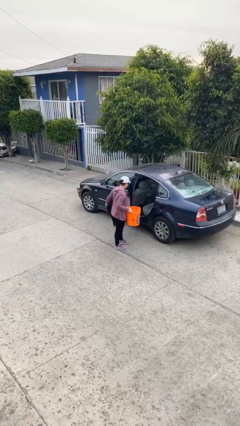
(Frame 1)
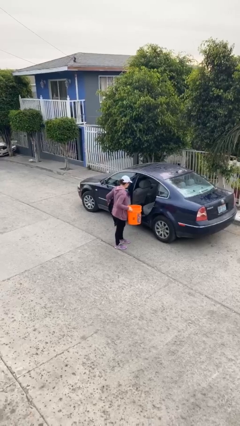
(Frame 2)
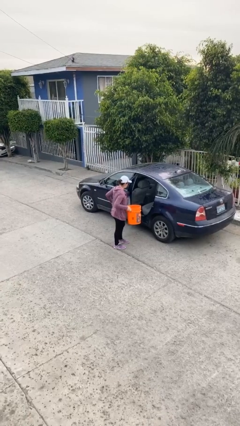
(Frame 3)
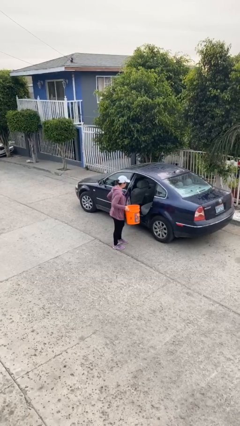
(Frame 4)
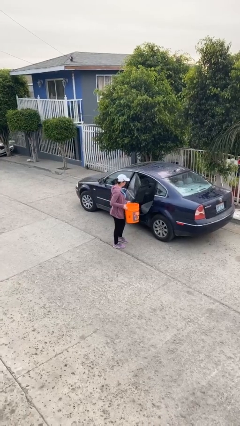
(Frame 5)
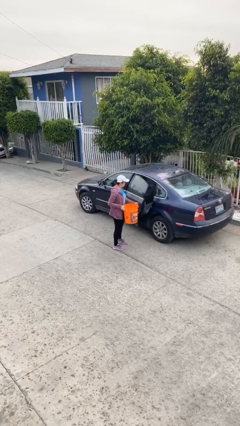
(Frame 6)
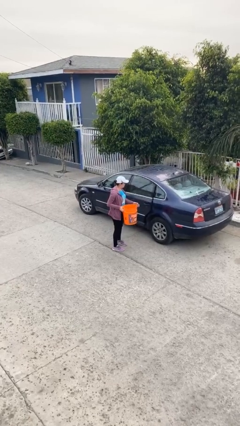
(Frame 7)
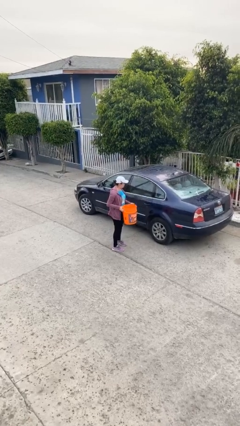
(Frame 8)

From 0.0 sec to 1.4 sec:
person closes car door

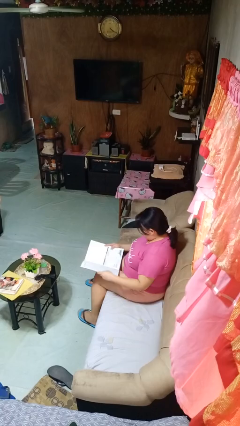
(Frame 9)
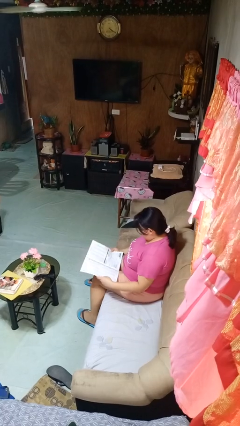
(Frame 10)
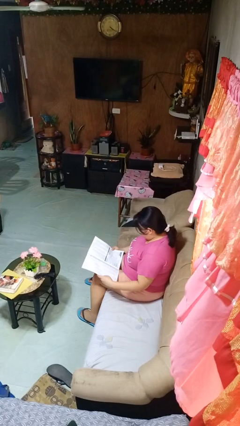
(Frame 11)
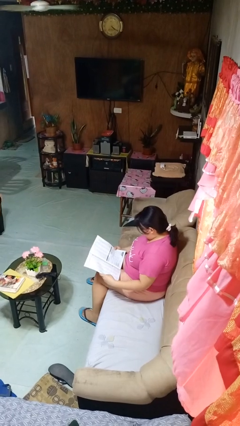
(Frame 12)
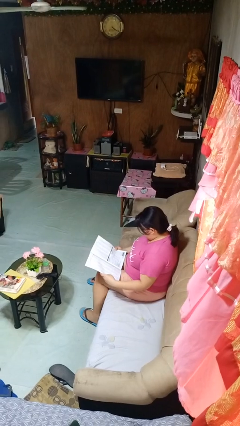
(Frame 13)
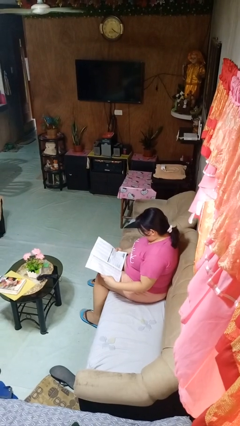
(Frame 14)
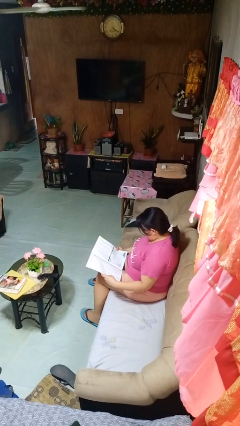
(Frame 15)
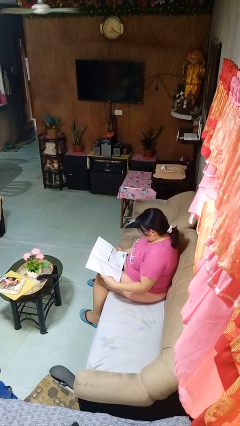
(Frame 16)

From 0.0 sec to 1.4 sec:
person reads magazine

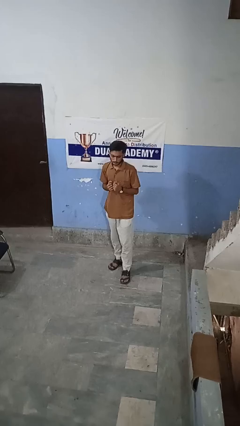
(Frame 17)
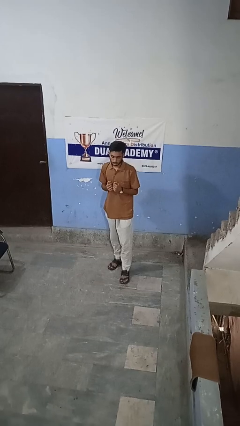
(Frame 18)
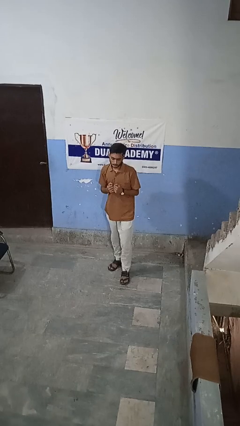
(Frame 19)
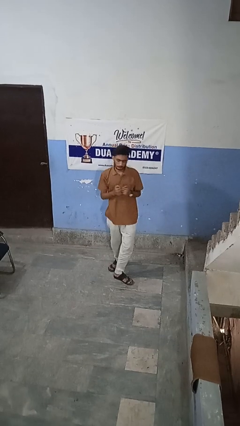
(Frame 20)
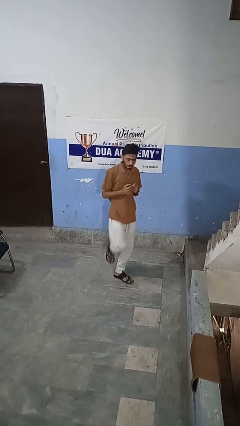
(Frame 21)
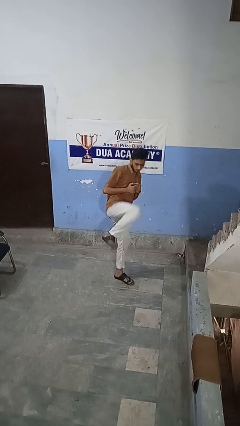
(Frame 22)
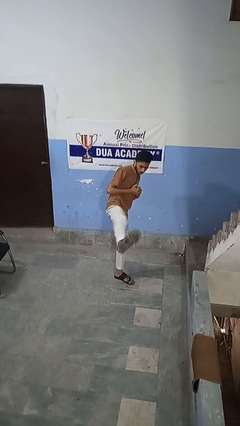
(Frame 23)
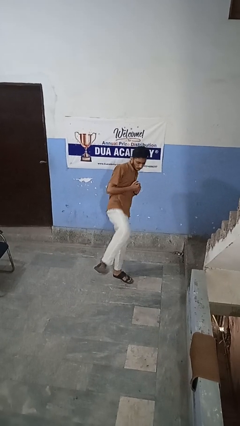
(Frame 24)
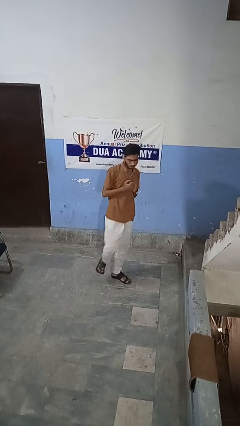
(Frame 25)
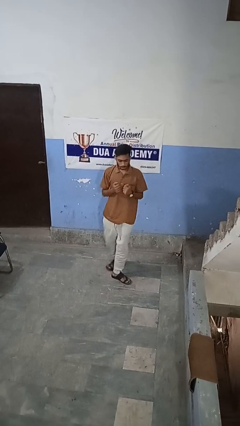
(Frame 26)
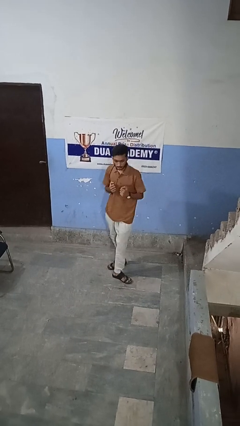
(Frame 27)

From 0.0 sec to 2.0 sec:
person karate kicks

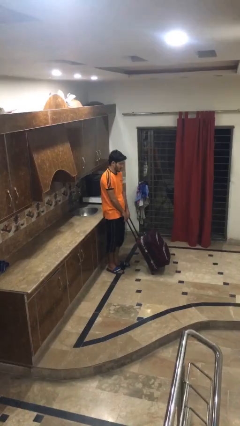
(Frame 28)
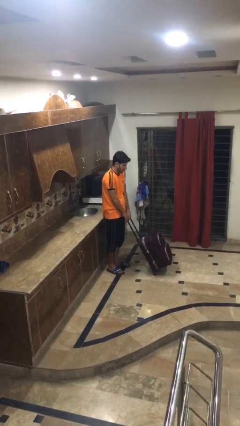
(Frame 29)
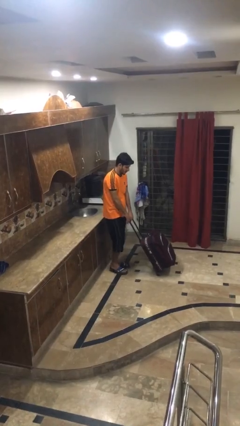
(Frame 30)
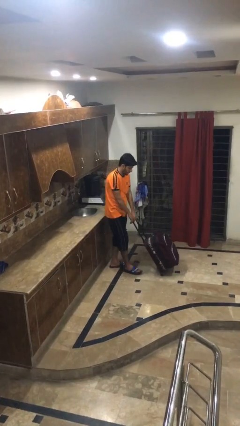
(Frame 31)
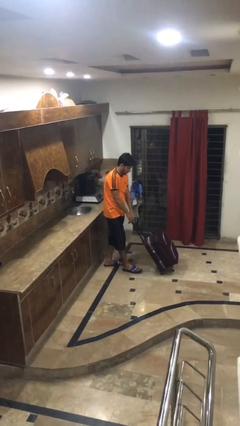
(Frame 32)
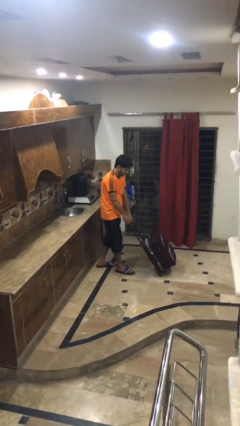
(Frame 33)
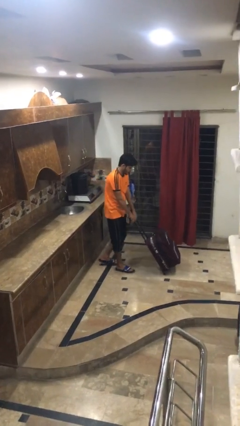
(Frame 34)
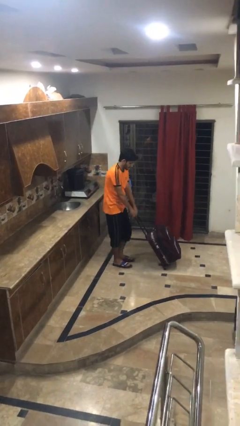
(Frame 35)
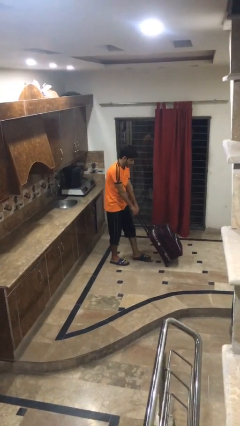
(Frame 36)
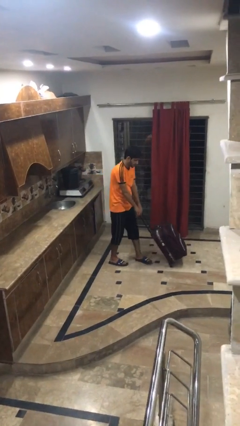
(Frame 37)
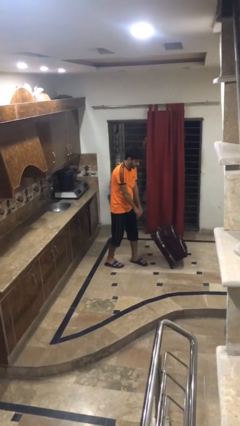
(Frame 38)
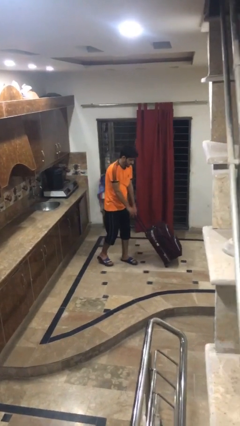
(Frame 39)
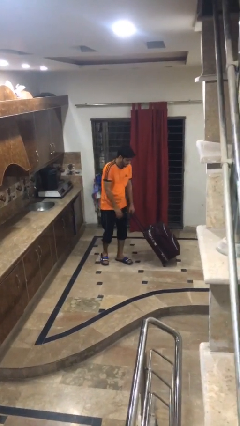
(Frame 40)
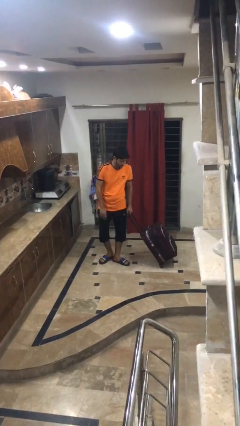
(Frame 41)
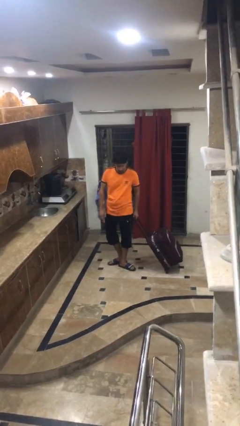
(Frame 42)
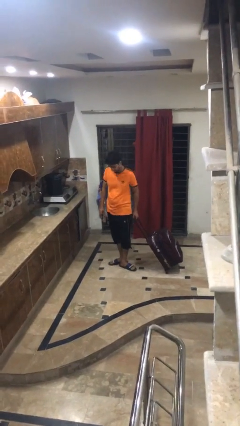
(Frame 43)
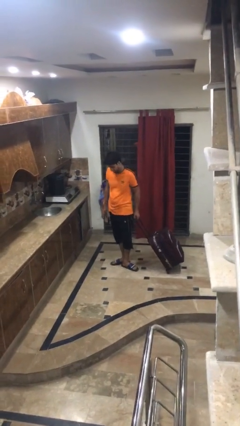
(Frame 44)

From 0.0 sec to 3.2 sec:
person pushes wheeled cart

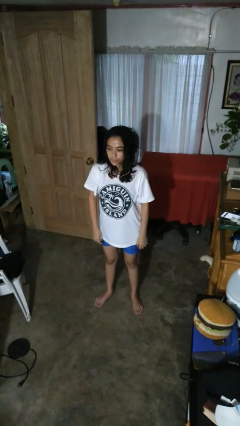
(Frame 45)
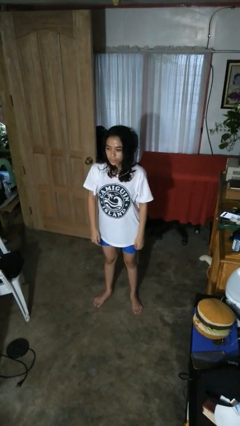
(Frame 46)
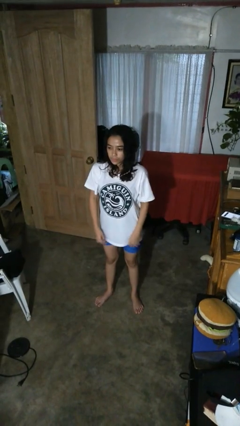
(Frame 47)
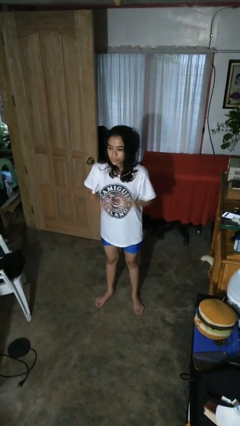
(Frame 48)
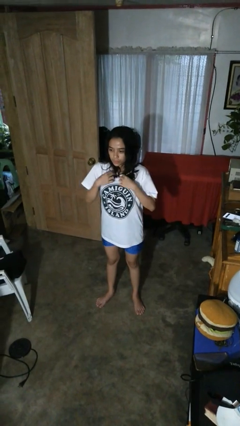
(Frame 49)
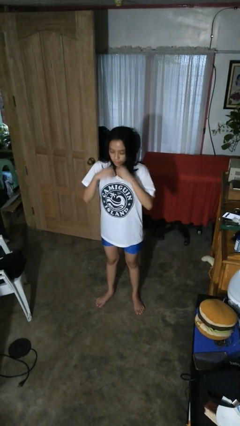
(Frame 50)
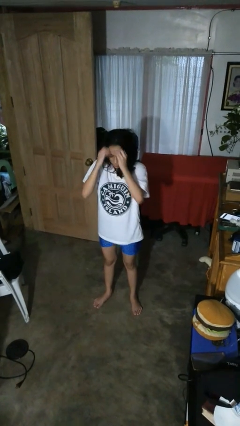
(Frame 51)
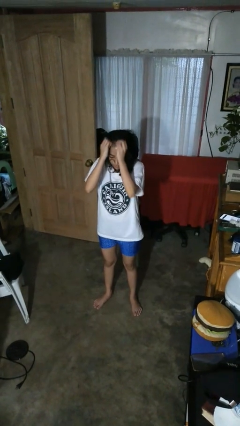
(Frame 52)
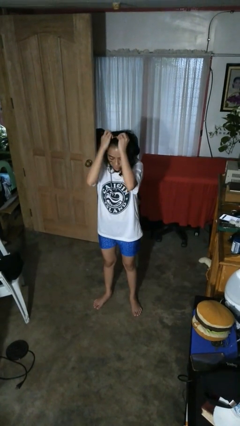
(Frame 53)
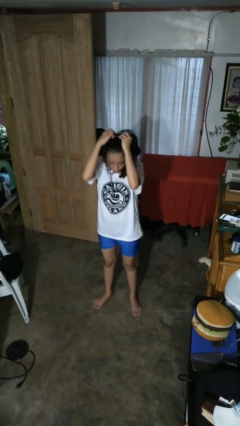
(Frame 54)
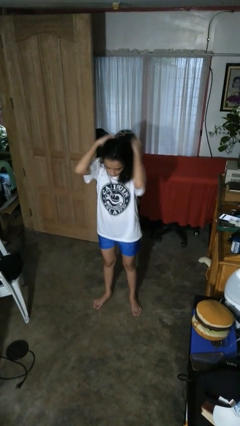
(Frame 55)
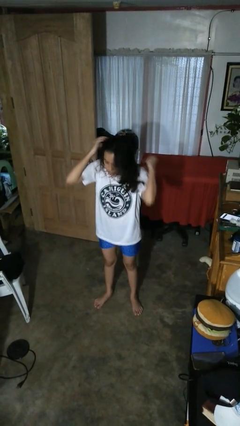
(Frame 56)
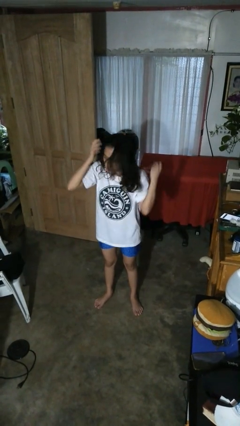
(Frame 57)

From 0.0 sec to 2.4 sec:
person takes off necklace

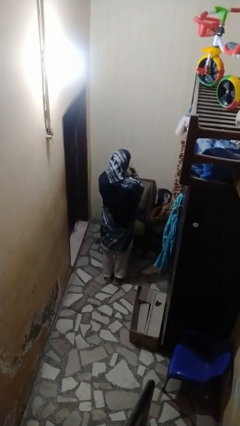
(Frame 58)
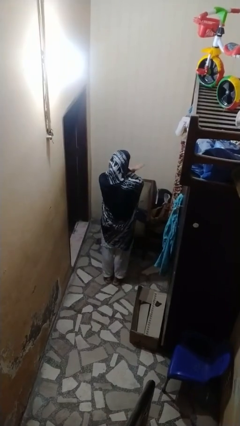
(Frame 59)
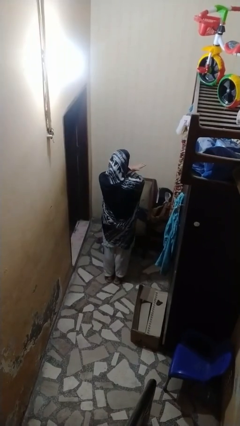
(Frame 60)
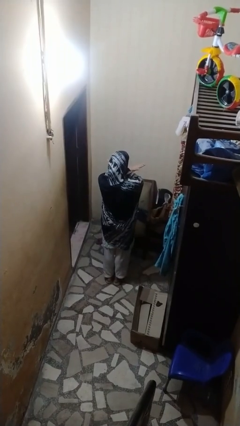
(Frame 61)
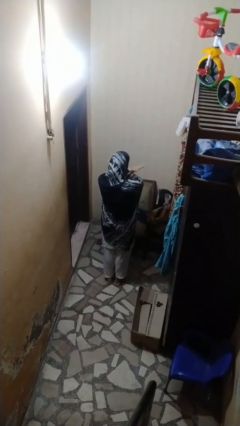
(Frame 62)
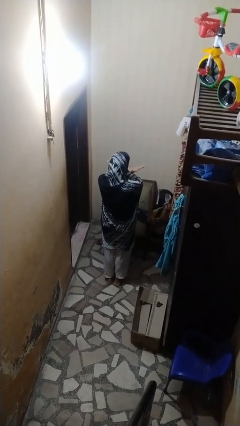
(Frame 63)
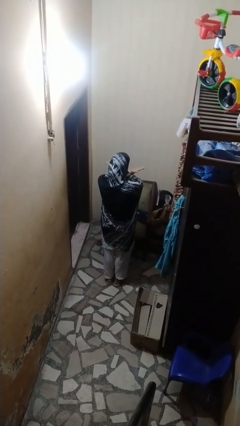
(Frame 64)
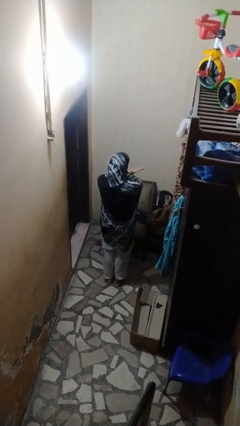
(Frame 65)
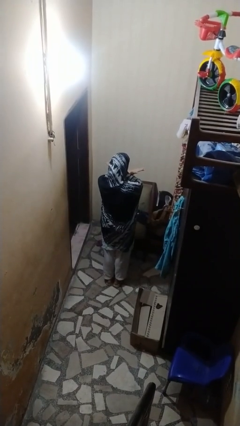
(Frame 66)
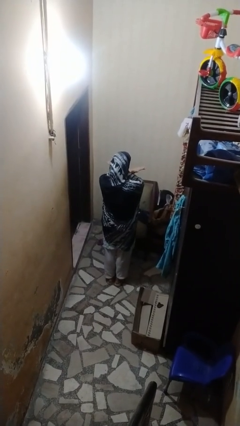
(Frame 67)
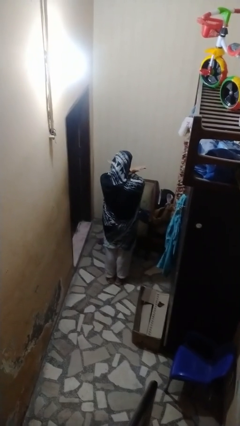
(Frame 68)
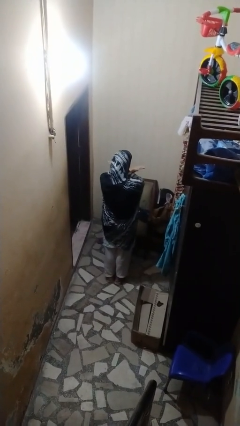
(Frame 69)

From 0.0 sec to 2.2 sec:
person gestures arms x

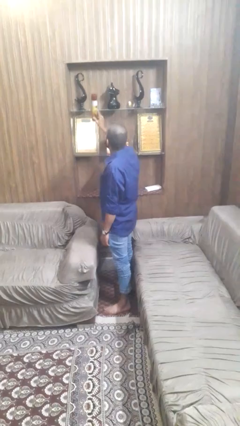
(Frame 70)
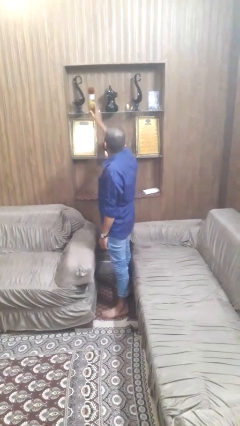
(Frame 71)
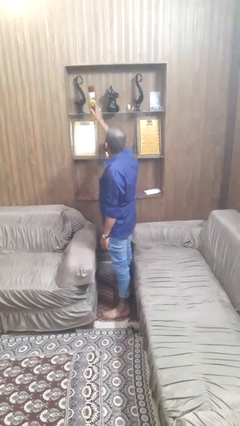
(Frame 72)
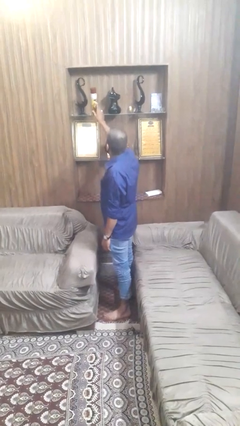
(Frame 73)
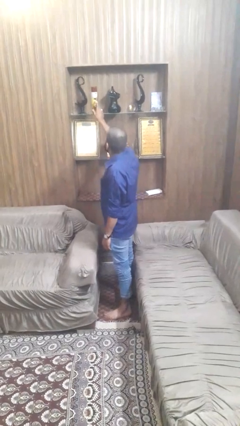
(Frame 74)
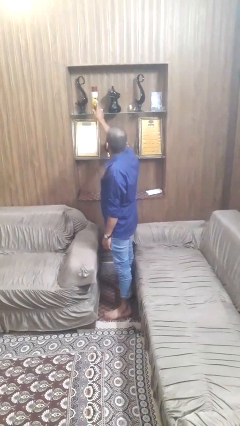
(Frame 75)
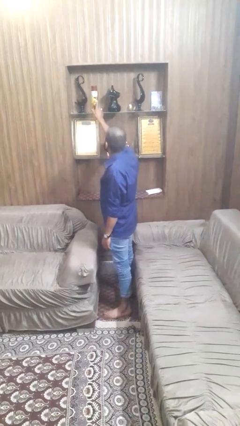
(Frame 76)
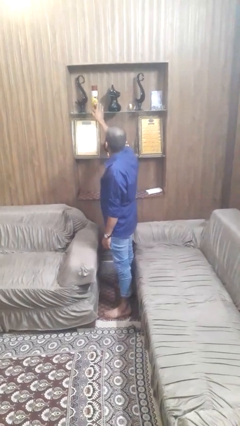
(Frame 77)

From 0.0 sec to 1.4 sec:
person puts down object on shelf

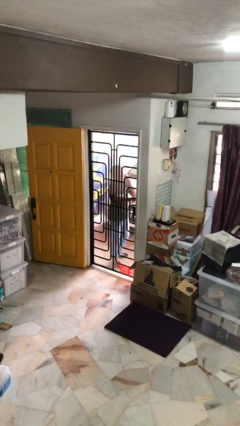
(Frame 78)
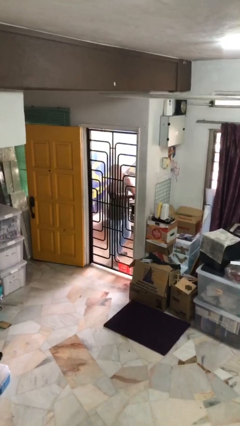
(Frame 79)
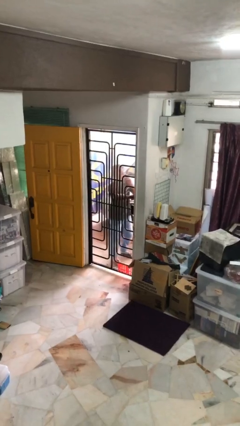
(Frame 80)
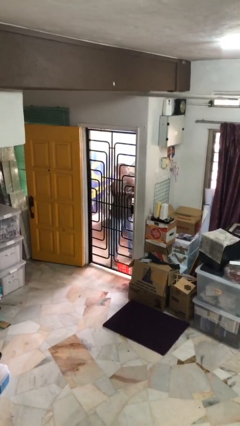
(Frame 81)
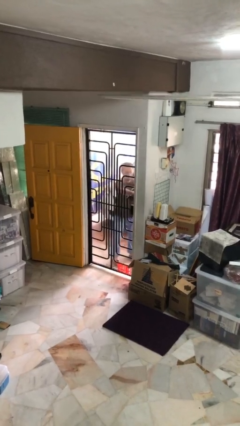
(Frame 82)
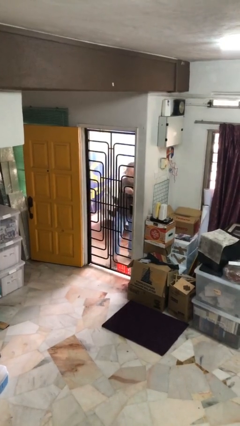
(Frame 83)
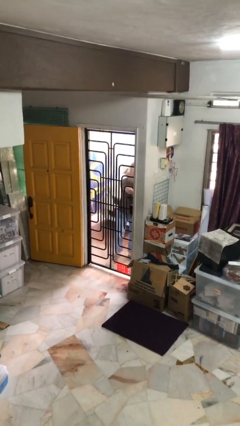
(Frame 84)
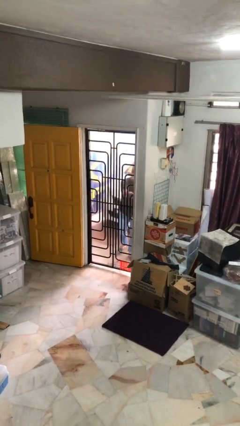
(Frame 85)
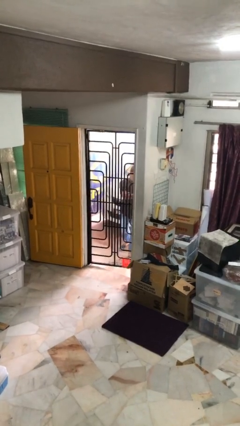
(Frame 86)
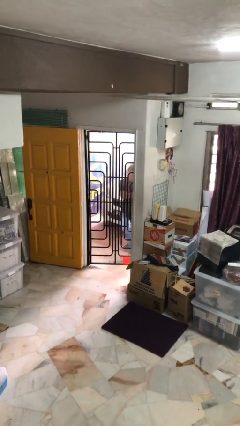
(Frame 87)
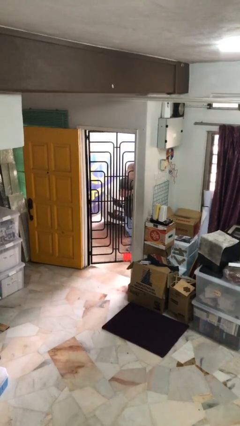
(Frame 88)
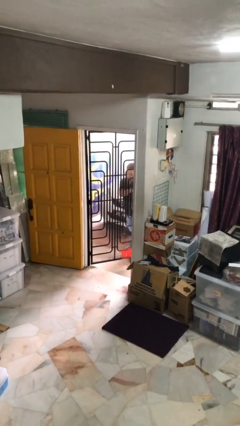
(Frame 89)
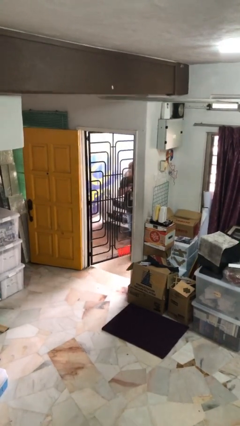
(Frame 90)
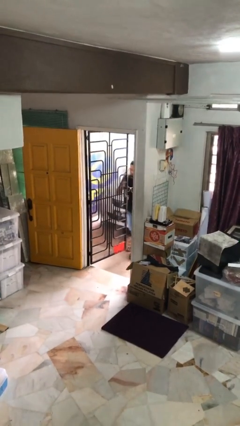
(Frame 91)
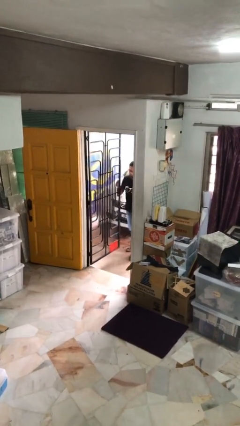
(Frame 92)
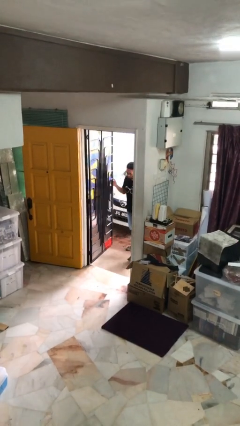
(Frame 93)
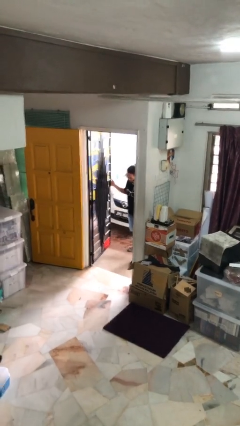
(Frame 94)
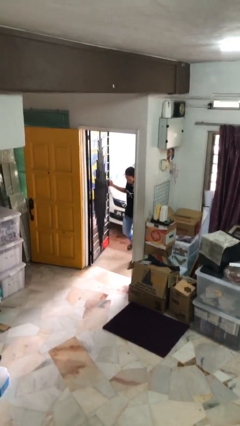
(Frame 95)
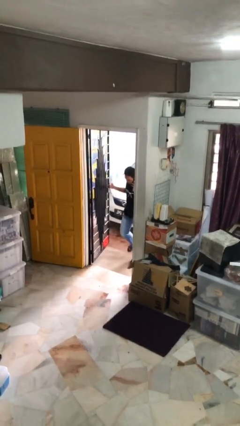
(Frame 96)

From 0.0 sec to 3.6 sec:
person opens facility door
